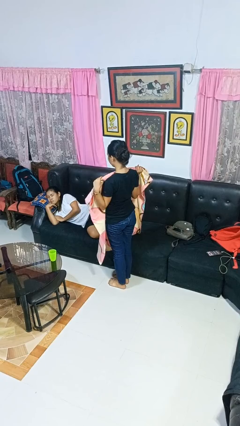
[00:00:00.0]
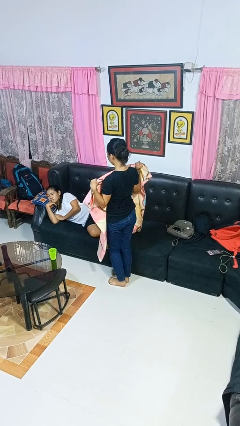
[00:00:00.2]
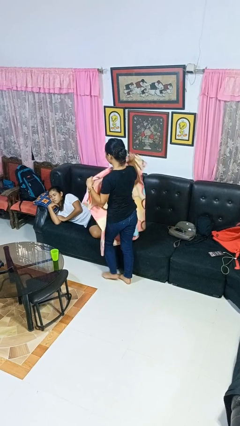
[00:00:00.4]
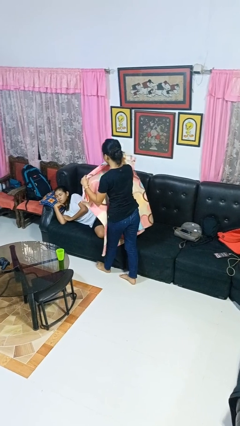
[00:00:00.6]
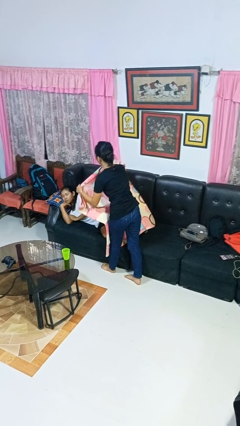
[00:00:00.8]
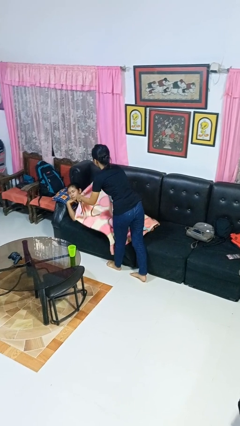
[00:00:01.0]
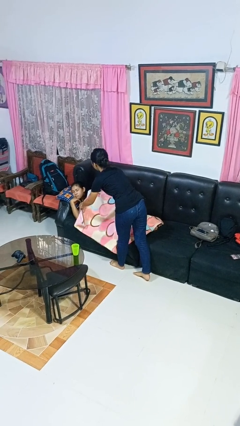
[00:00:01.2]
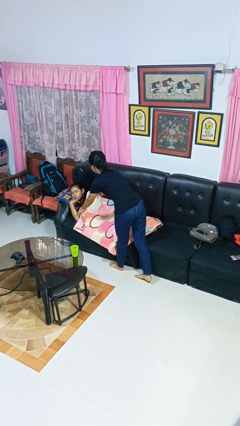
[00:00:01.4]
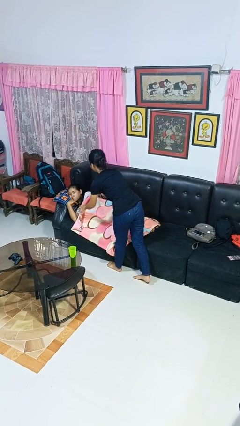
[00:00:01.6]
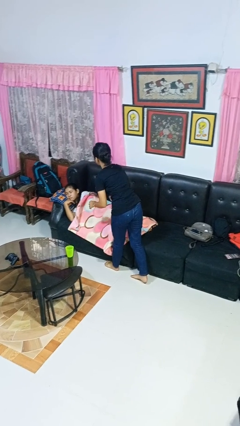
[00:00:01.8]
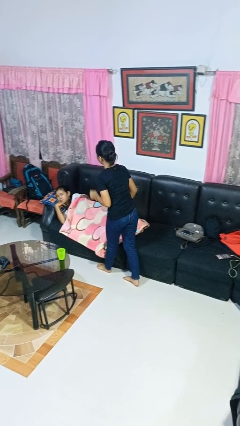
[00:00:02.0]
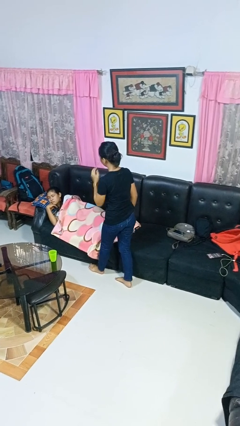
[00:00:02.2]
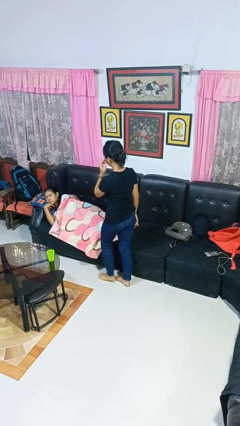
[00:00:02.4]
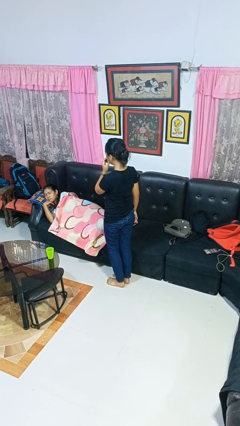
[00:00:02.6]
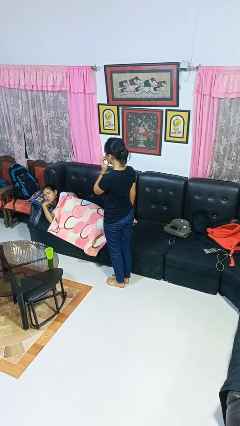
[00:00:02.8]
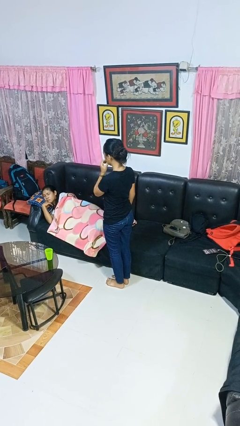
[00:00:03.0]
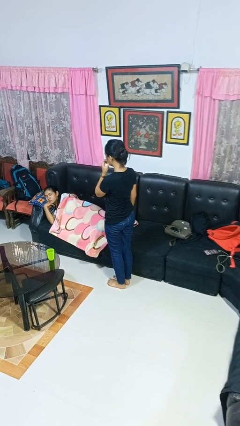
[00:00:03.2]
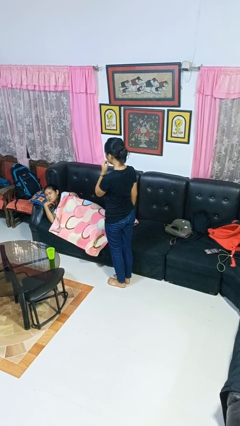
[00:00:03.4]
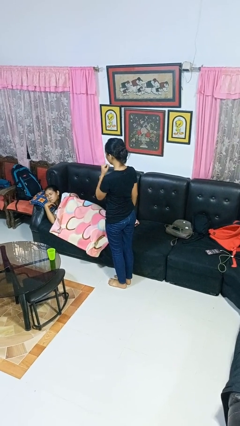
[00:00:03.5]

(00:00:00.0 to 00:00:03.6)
person covers friend with blanket

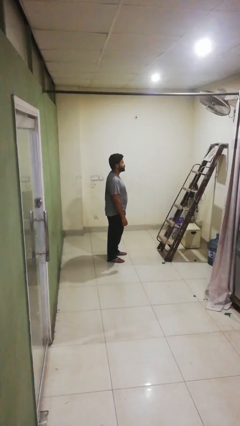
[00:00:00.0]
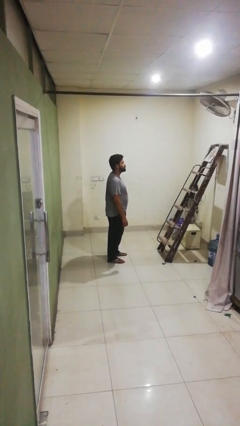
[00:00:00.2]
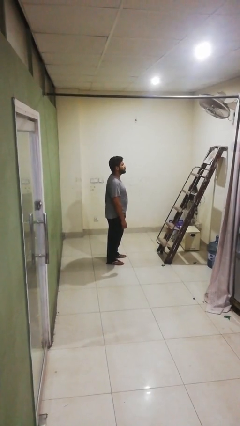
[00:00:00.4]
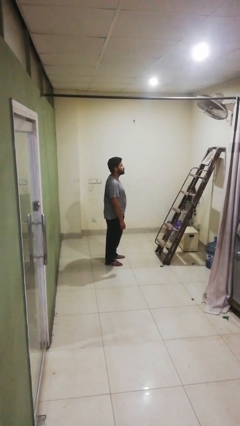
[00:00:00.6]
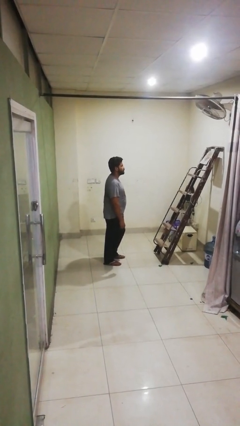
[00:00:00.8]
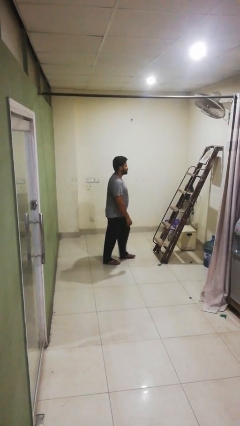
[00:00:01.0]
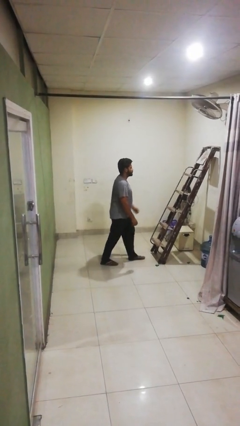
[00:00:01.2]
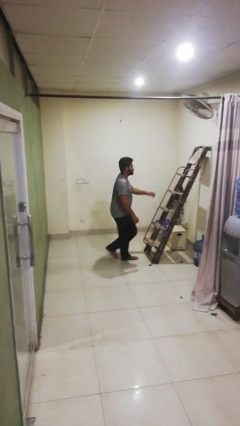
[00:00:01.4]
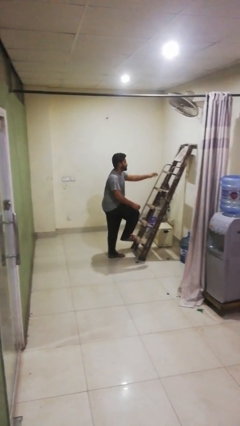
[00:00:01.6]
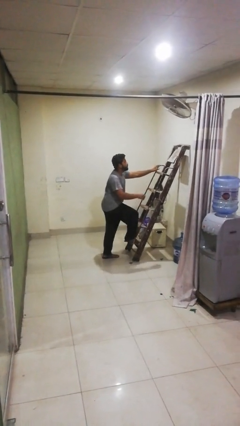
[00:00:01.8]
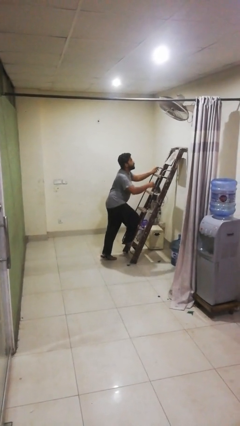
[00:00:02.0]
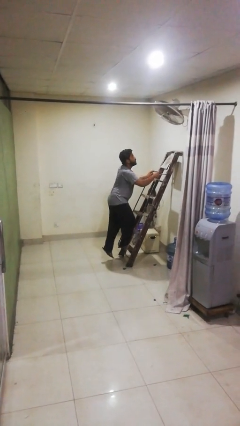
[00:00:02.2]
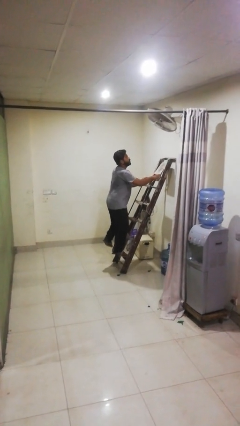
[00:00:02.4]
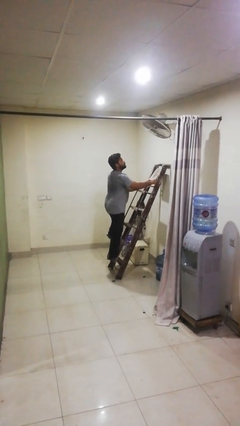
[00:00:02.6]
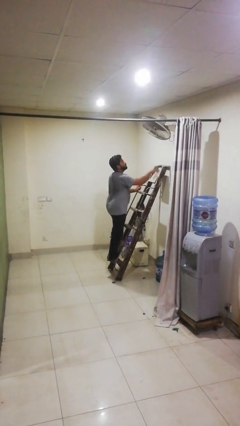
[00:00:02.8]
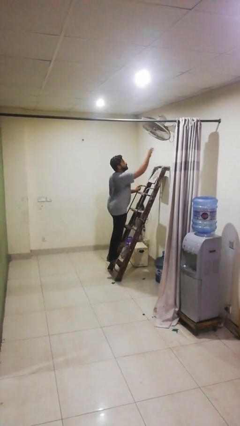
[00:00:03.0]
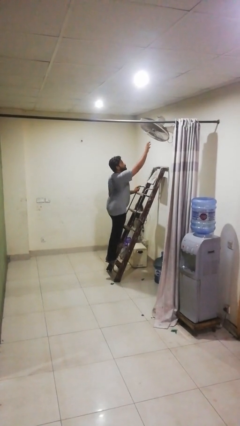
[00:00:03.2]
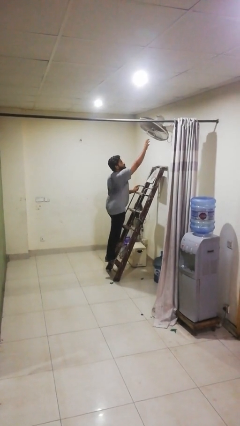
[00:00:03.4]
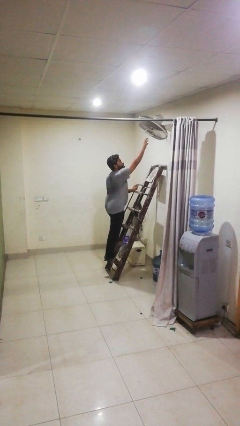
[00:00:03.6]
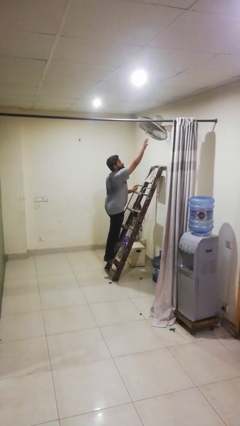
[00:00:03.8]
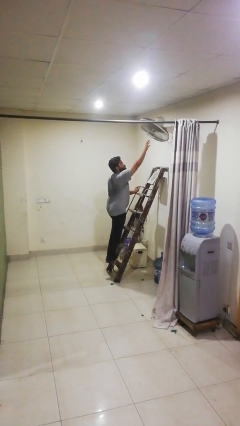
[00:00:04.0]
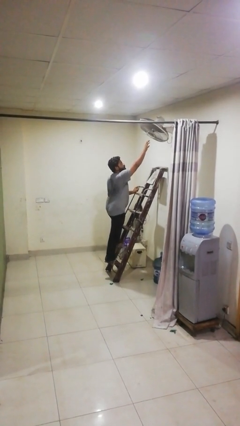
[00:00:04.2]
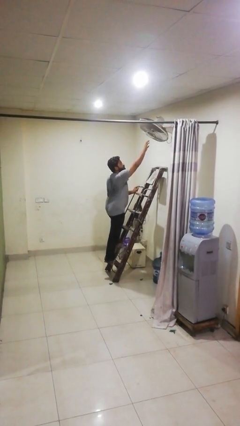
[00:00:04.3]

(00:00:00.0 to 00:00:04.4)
person climbs up ladder

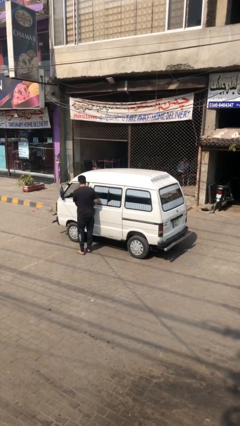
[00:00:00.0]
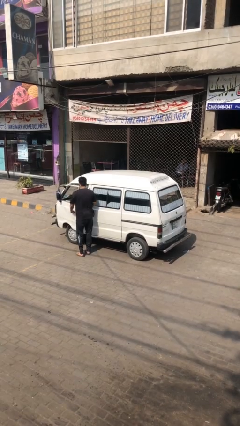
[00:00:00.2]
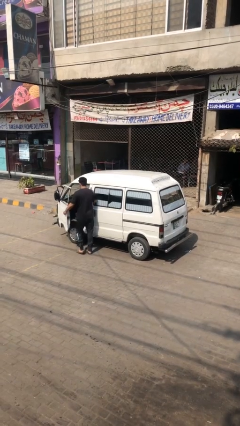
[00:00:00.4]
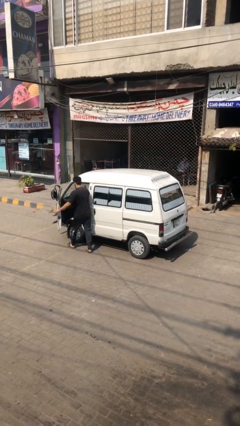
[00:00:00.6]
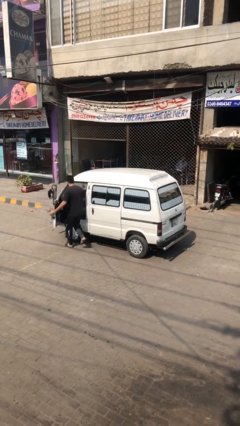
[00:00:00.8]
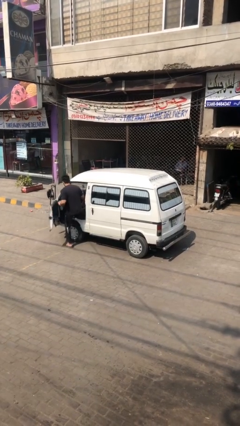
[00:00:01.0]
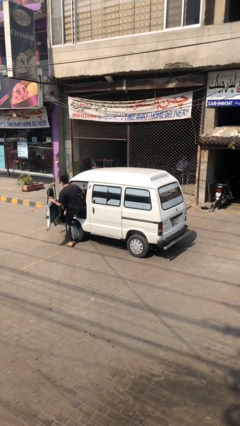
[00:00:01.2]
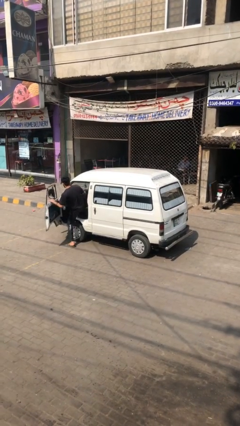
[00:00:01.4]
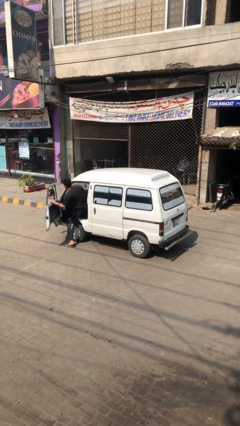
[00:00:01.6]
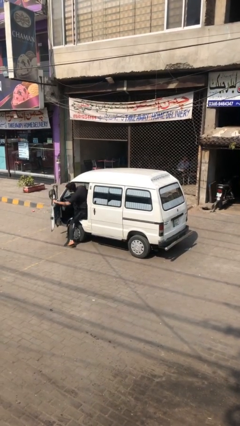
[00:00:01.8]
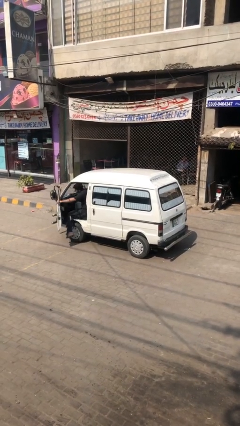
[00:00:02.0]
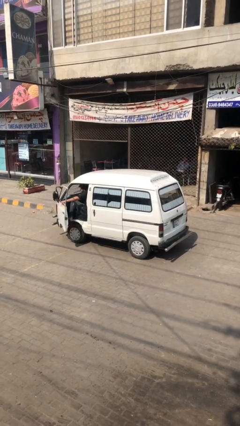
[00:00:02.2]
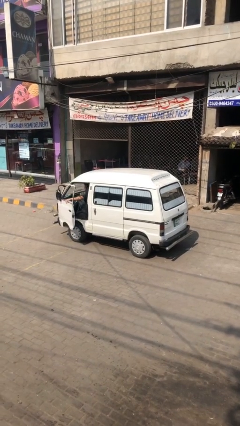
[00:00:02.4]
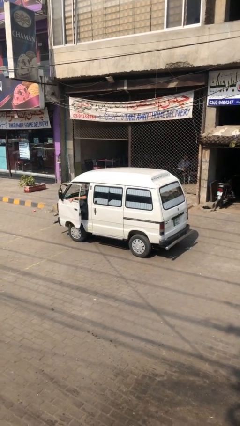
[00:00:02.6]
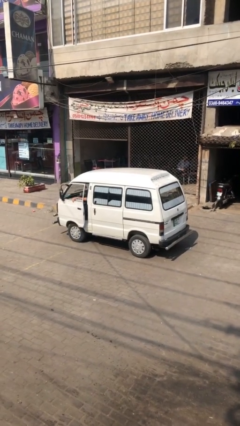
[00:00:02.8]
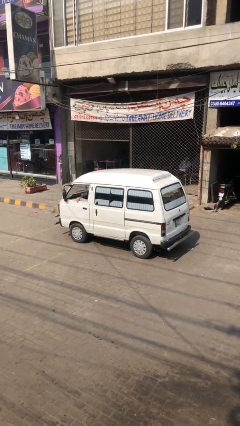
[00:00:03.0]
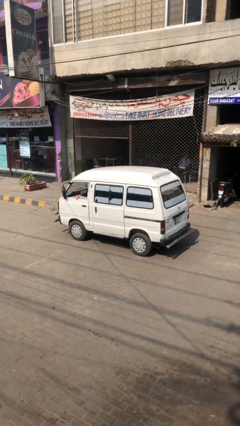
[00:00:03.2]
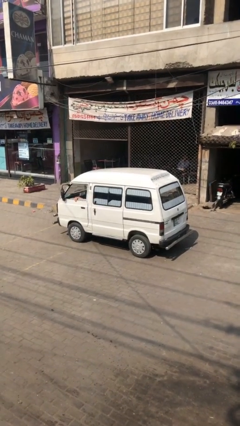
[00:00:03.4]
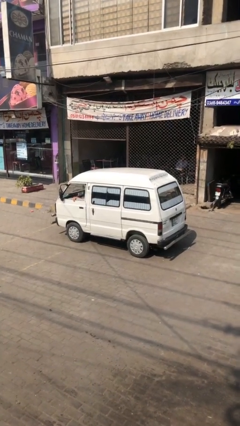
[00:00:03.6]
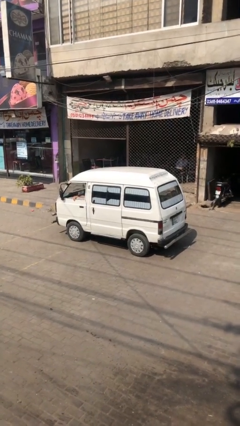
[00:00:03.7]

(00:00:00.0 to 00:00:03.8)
car picks up person

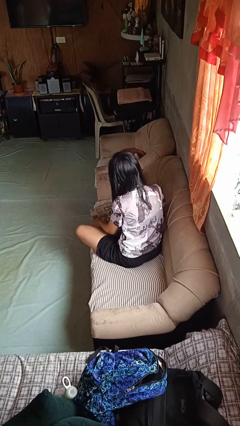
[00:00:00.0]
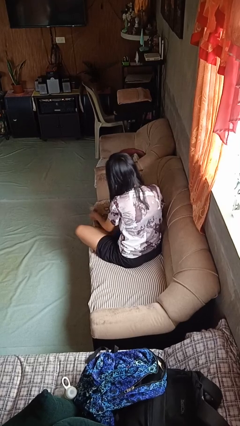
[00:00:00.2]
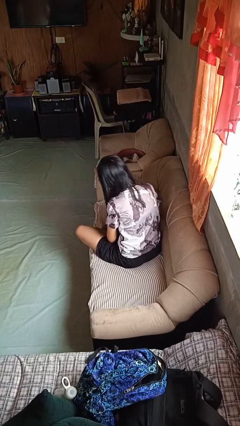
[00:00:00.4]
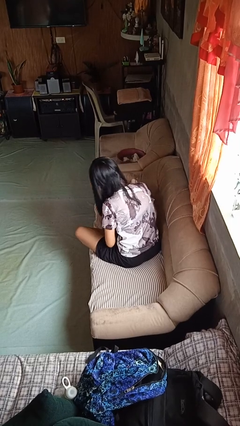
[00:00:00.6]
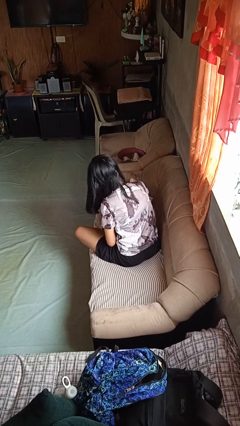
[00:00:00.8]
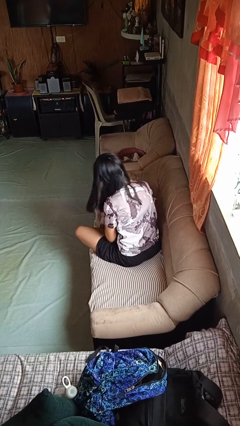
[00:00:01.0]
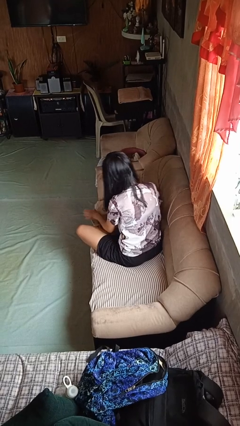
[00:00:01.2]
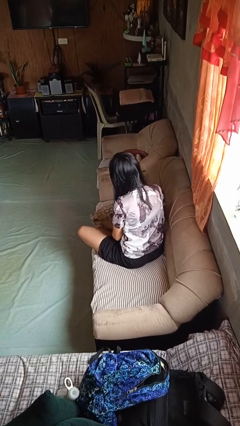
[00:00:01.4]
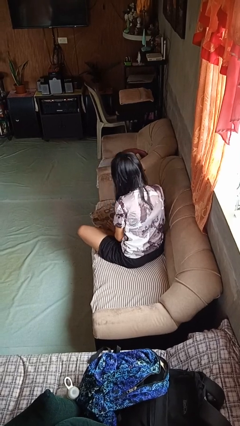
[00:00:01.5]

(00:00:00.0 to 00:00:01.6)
person searches in couch

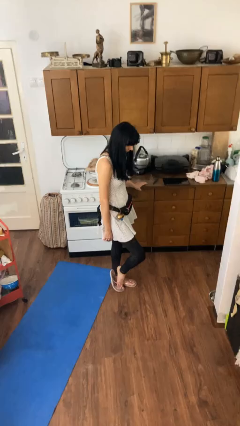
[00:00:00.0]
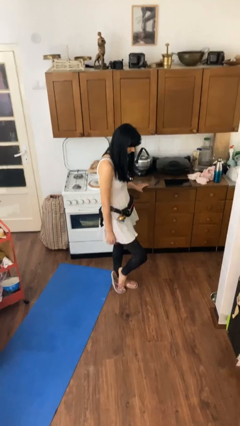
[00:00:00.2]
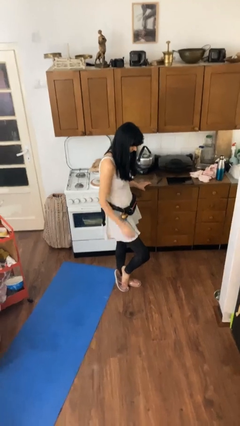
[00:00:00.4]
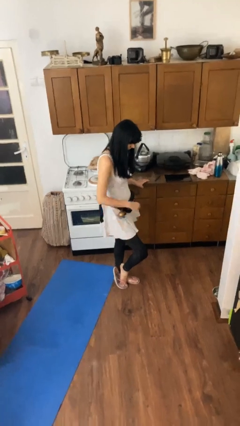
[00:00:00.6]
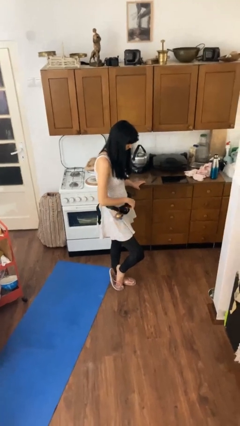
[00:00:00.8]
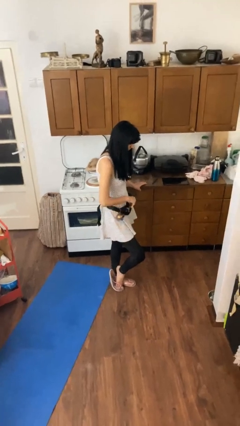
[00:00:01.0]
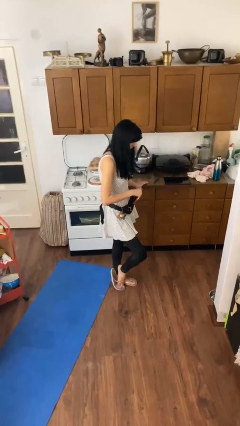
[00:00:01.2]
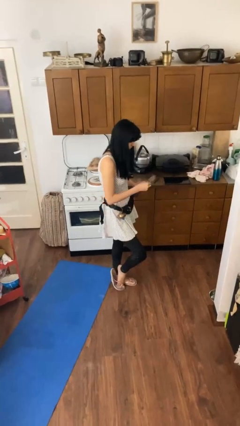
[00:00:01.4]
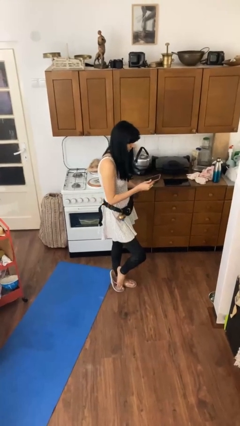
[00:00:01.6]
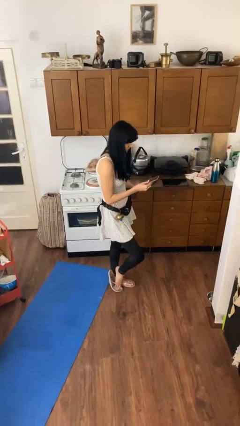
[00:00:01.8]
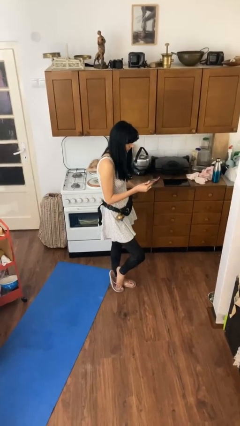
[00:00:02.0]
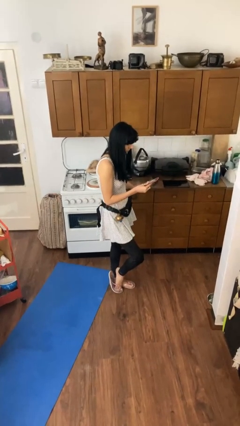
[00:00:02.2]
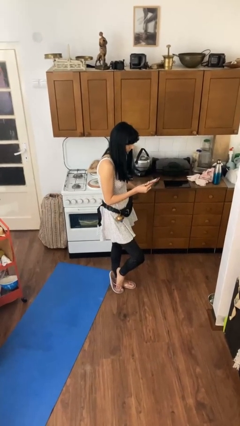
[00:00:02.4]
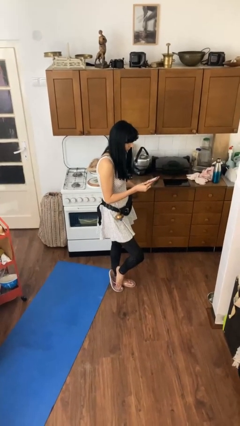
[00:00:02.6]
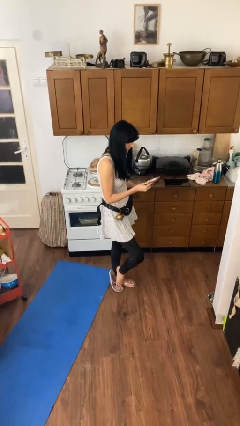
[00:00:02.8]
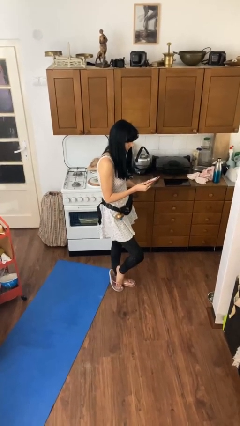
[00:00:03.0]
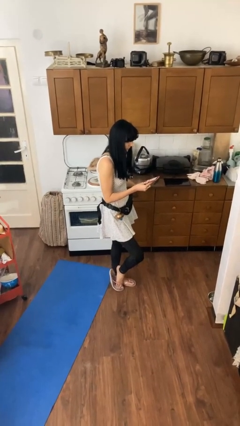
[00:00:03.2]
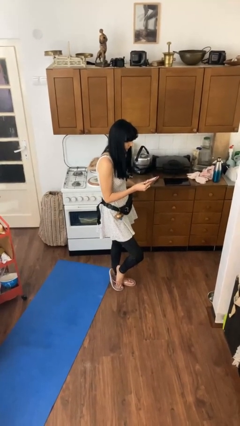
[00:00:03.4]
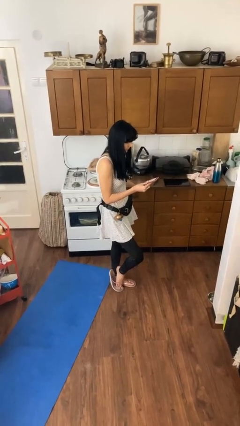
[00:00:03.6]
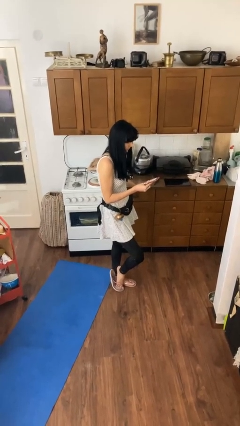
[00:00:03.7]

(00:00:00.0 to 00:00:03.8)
person takes phone from pocket
